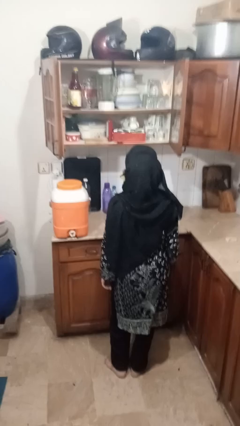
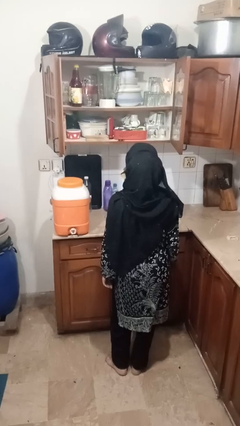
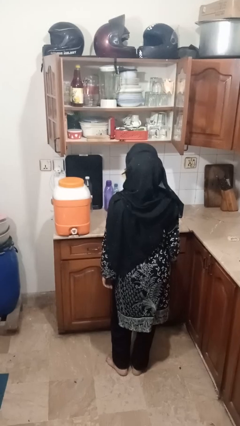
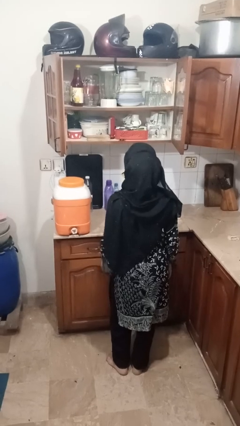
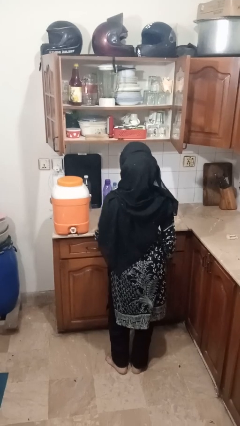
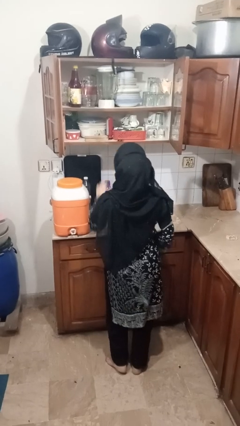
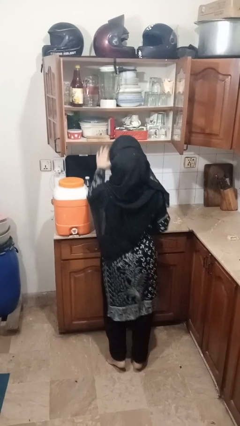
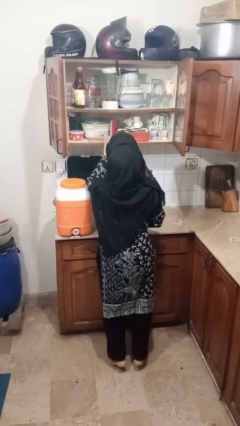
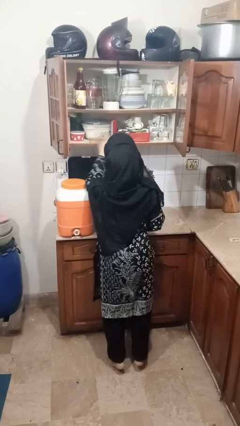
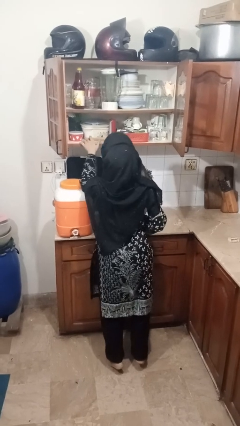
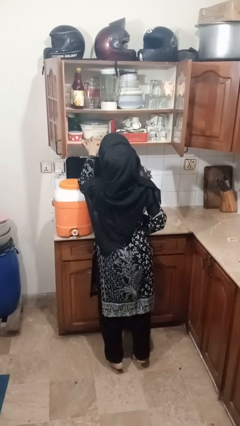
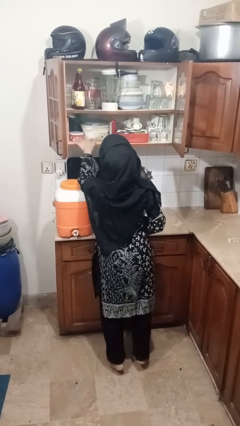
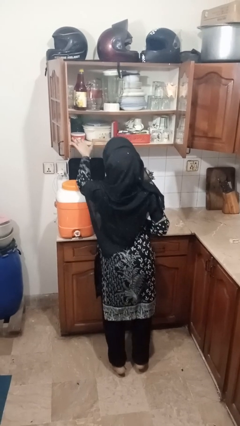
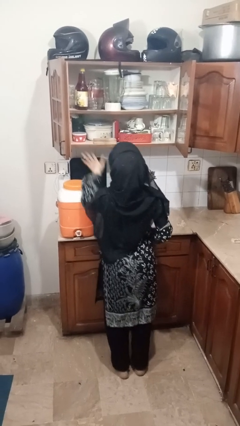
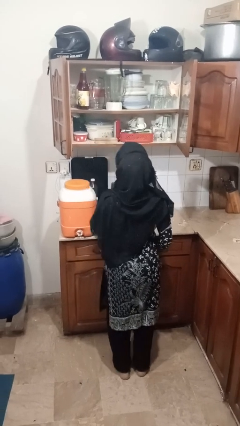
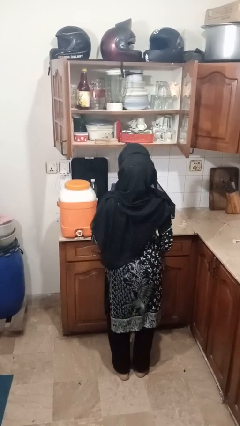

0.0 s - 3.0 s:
person searches in cabinet

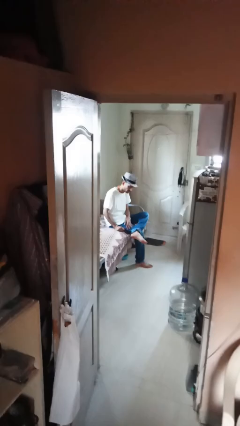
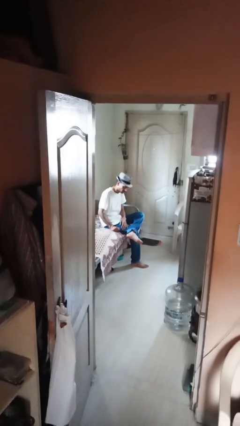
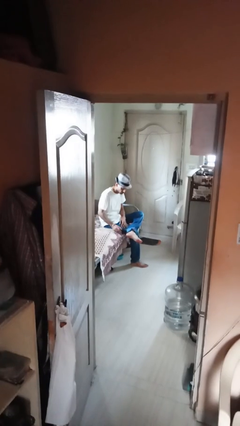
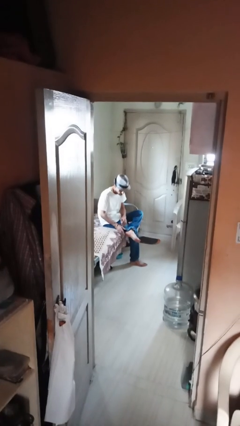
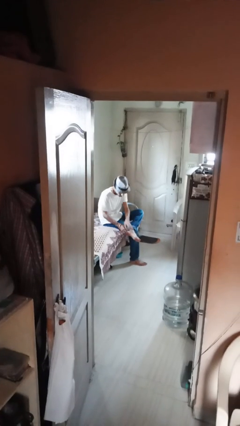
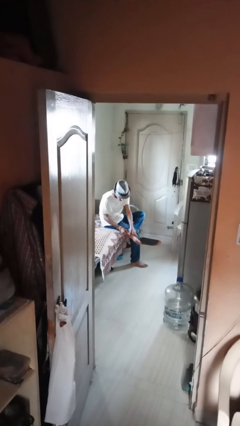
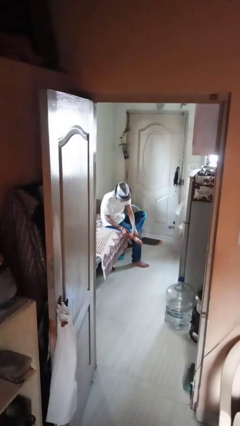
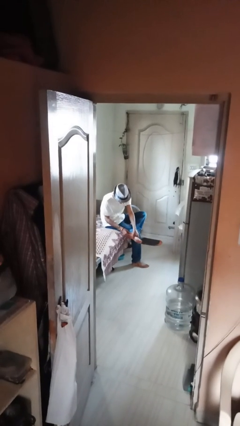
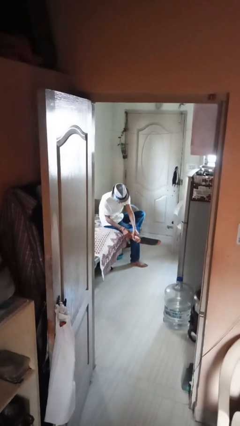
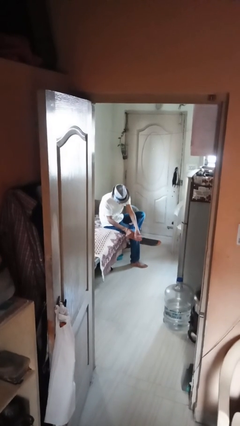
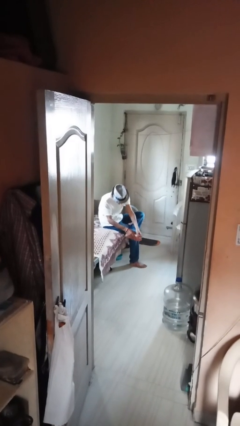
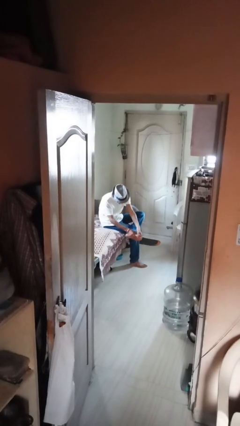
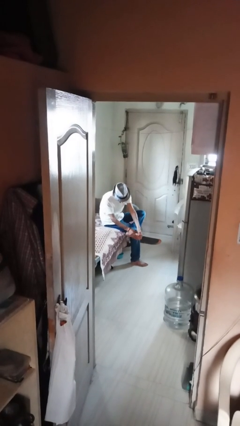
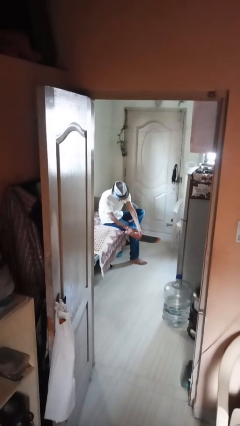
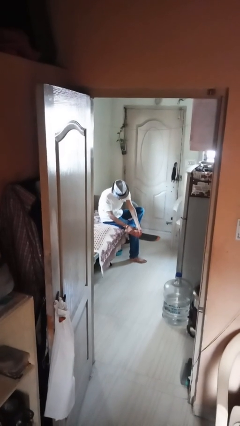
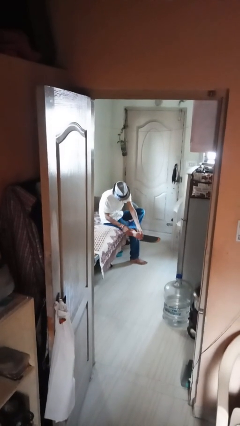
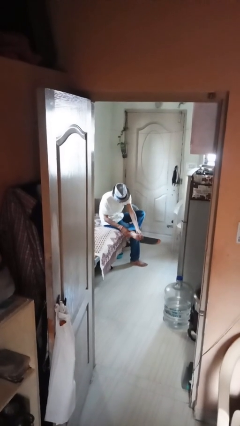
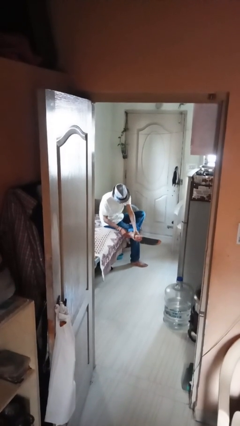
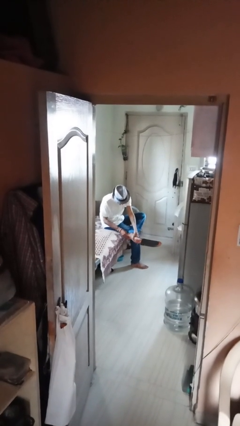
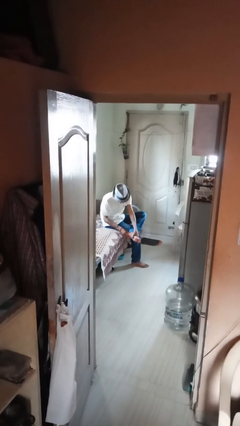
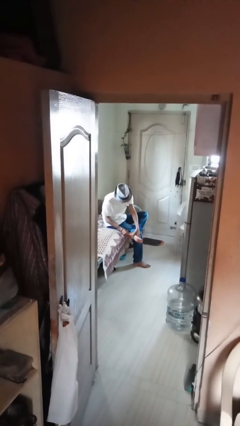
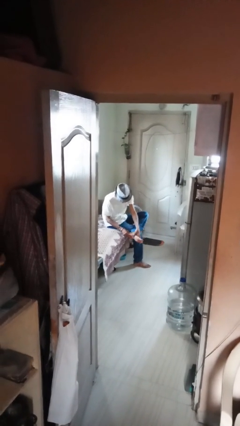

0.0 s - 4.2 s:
person rubs foot

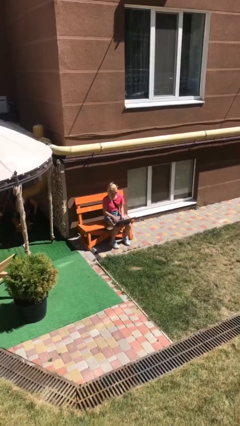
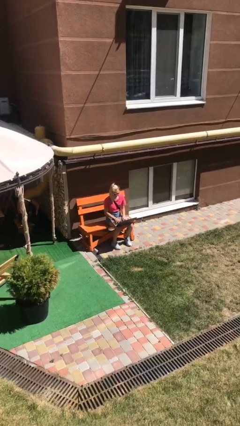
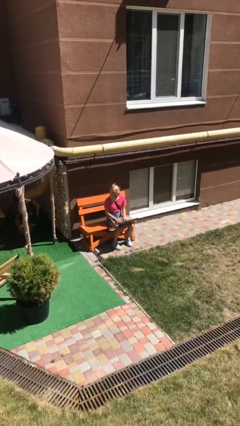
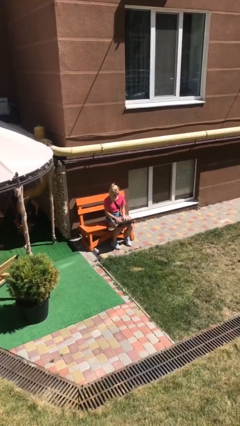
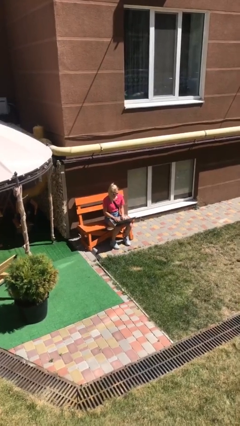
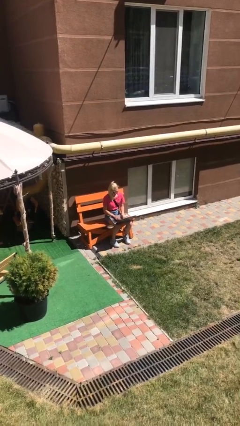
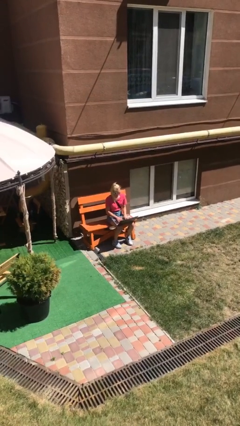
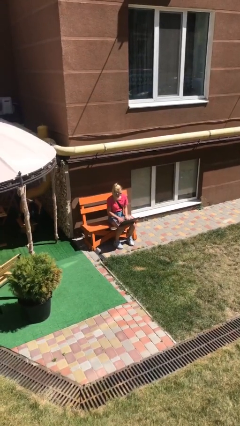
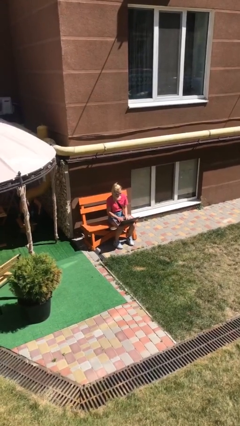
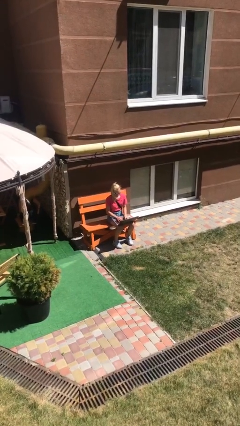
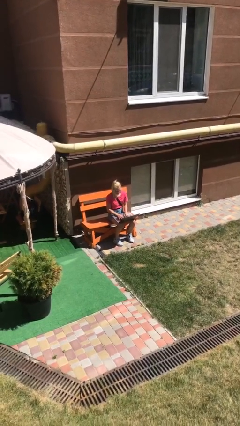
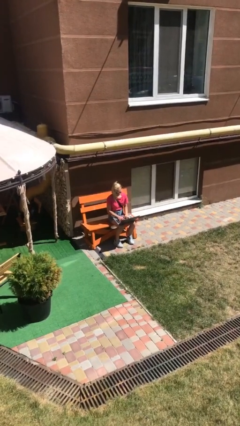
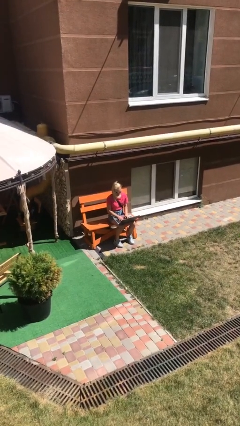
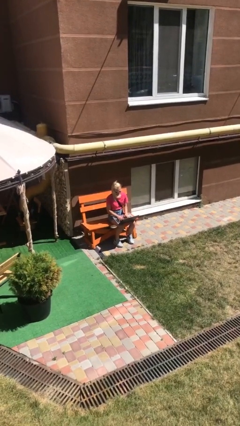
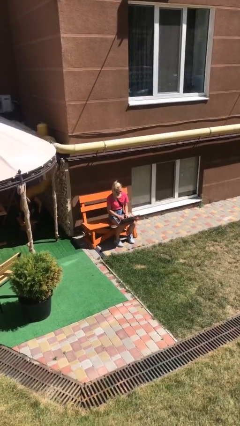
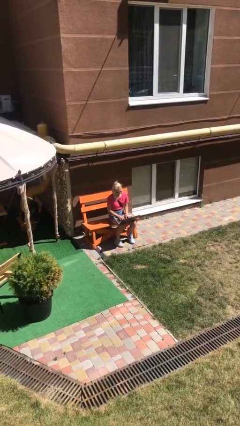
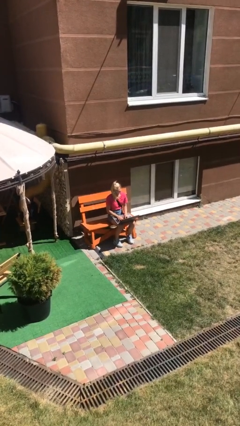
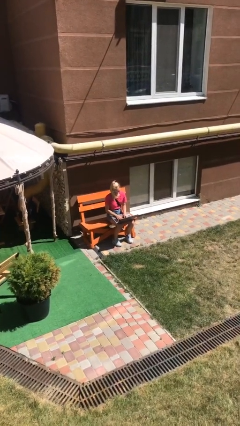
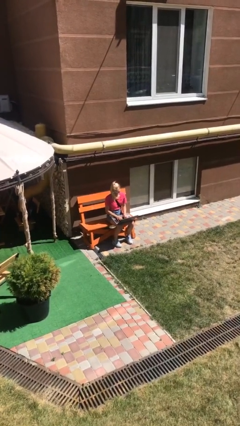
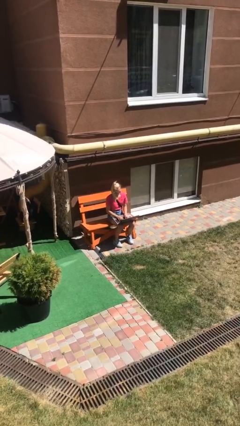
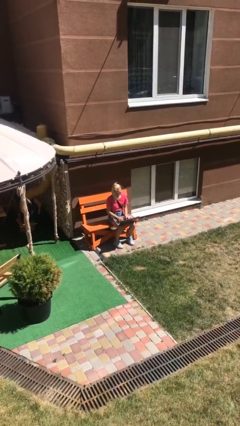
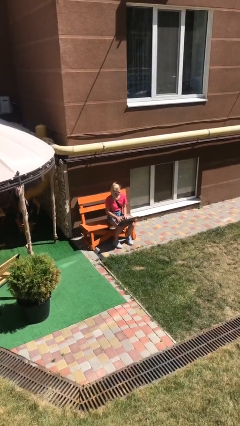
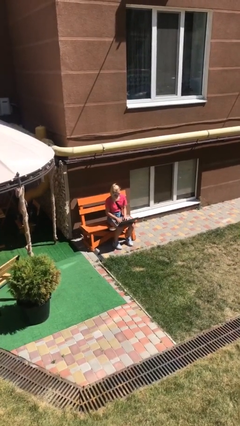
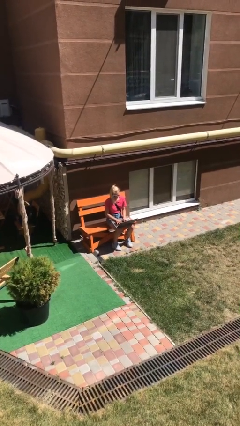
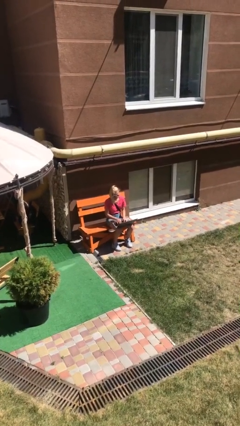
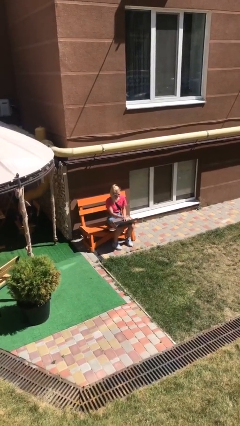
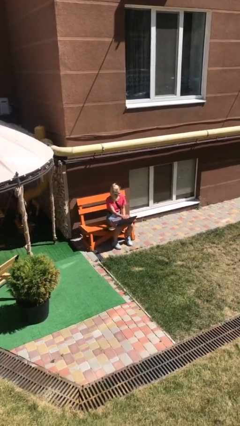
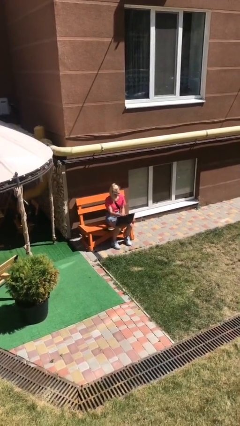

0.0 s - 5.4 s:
person interacts with laptop

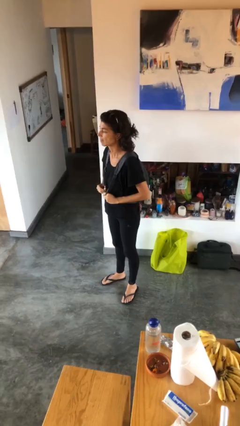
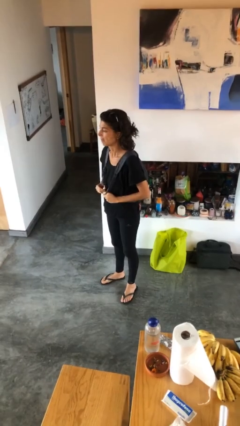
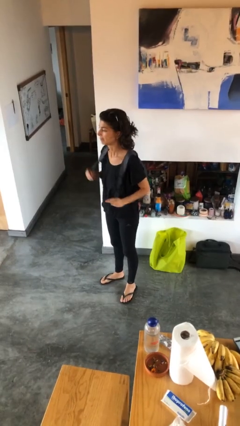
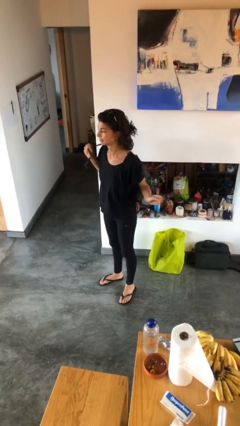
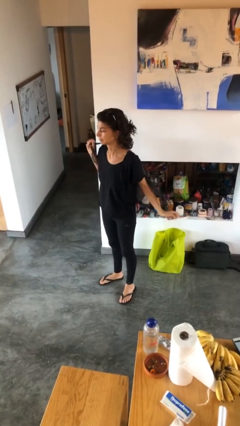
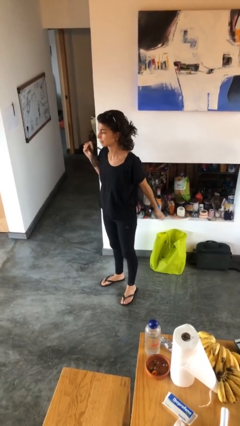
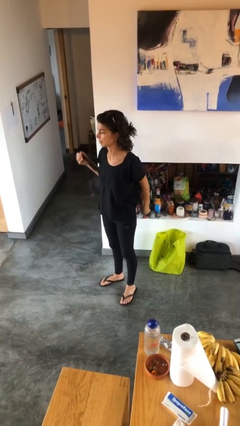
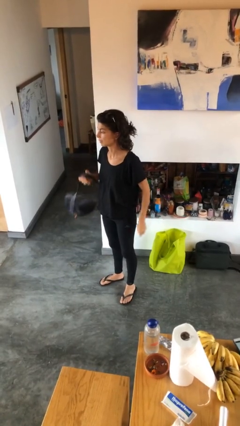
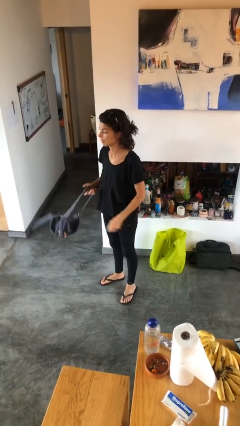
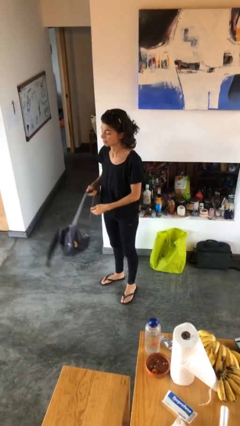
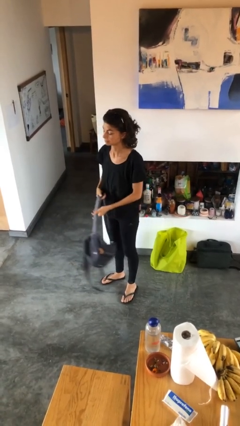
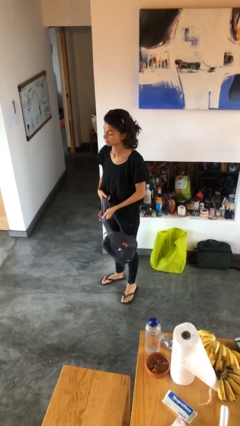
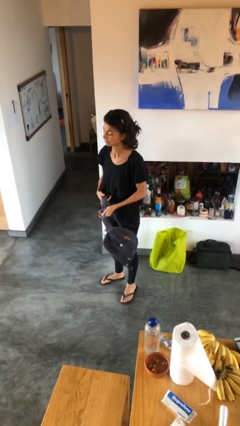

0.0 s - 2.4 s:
person takes off backpack

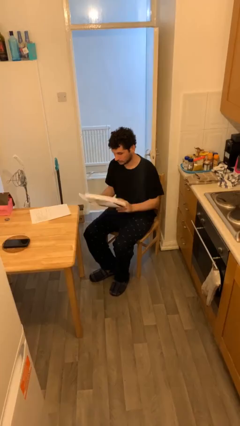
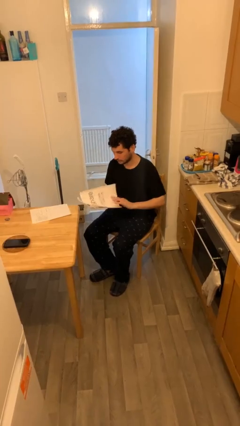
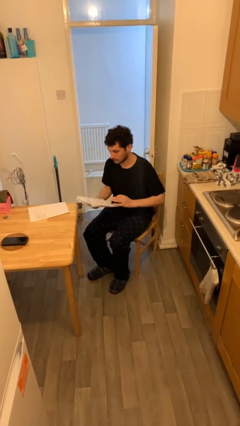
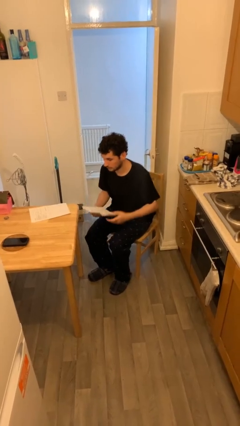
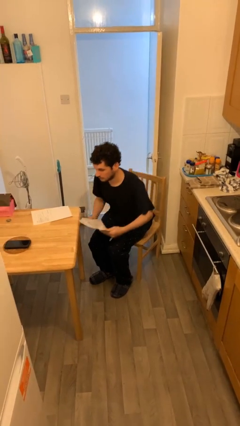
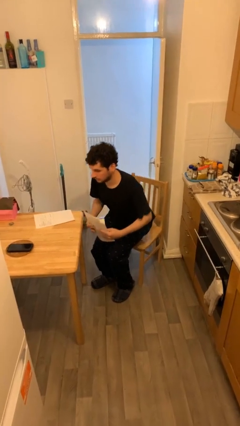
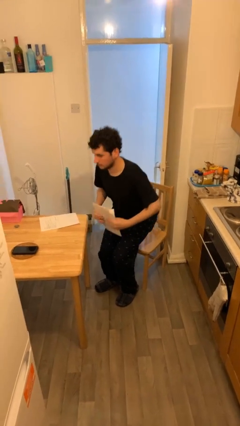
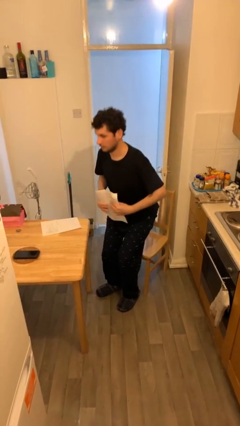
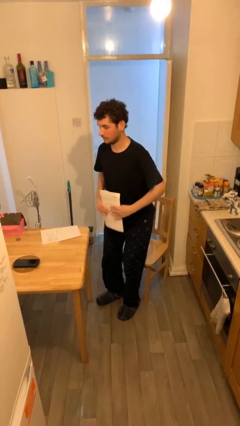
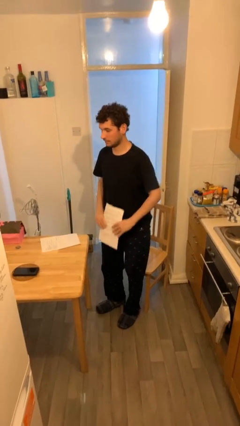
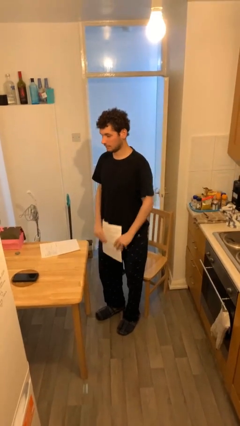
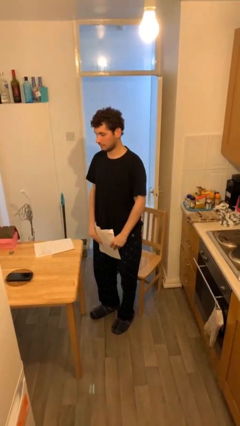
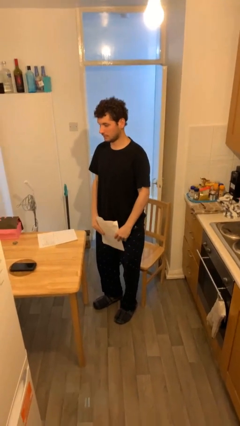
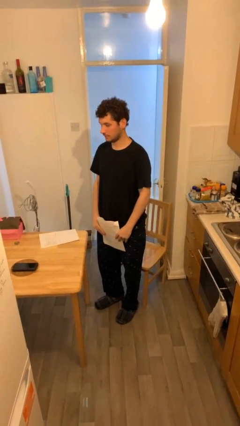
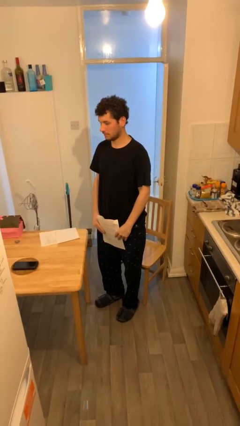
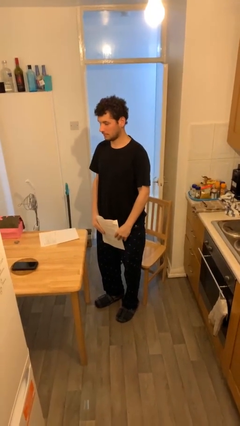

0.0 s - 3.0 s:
person stands up
